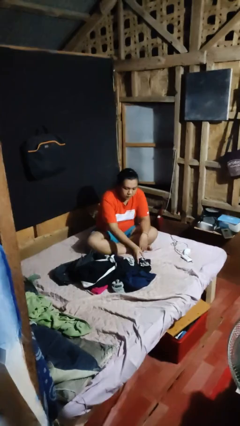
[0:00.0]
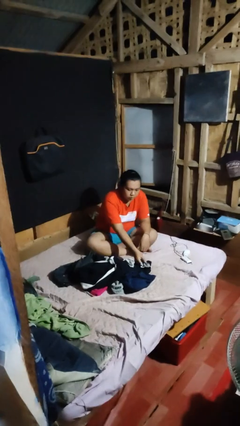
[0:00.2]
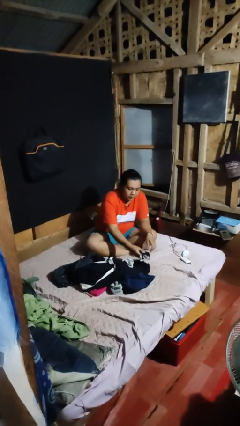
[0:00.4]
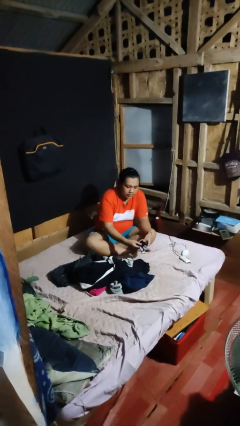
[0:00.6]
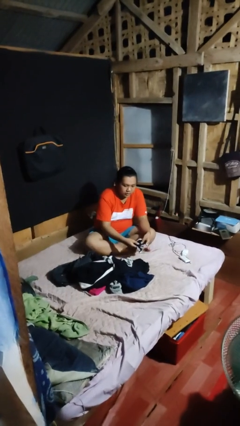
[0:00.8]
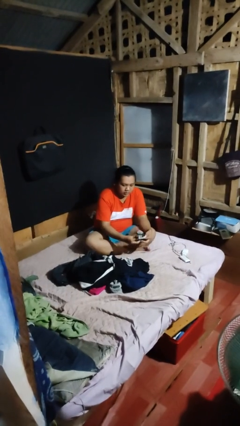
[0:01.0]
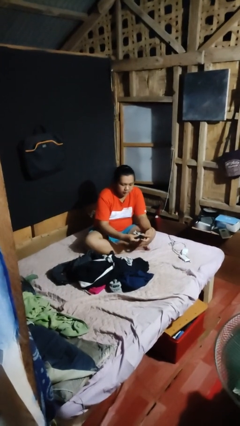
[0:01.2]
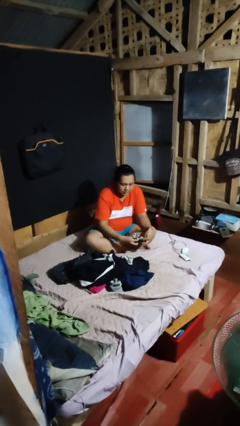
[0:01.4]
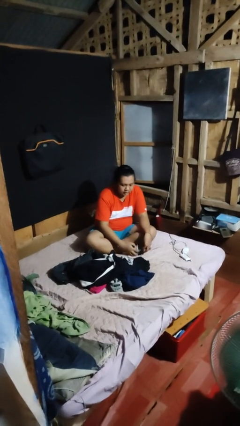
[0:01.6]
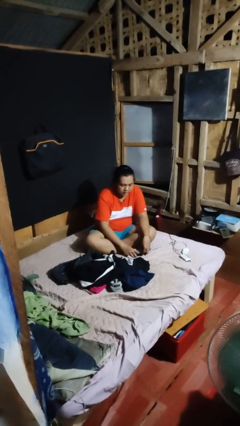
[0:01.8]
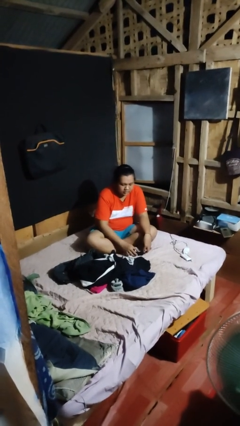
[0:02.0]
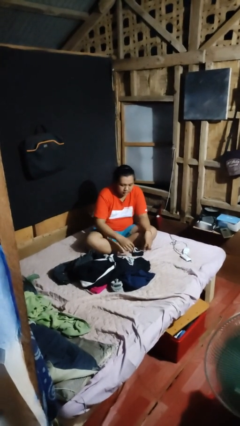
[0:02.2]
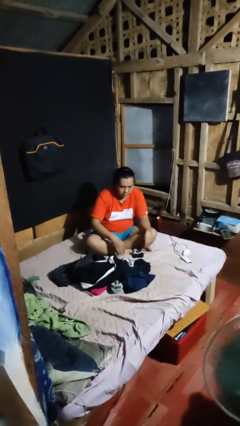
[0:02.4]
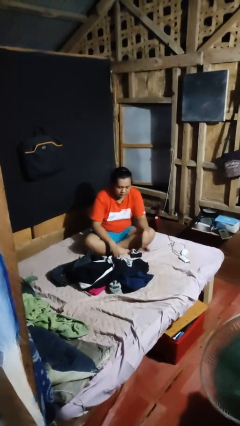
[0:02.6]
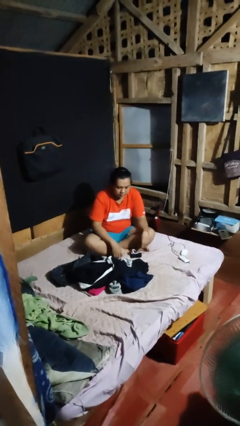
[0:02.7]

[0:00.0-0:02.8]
person folds socks

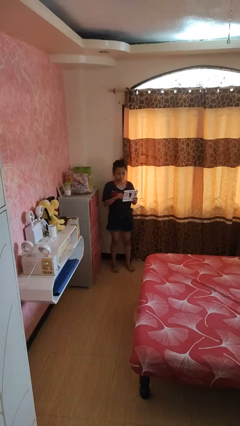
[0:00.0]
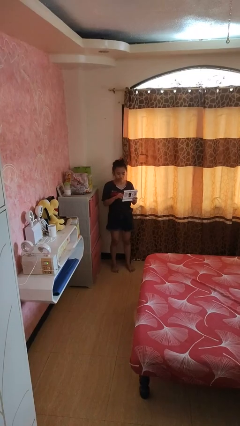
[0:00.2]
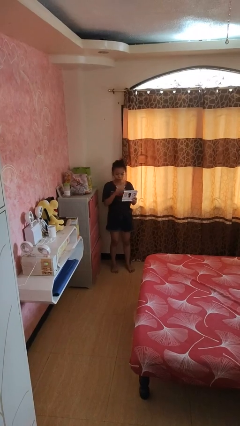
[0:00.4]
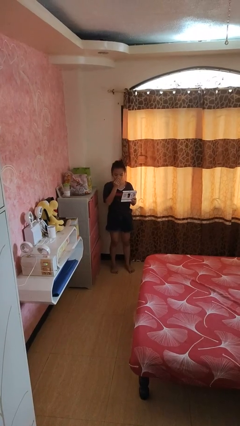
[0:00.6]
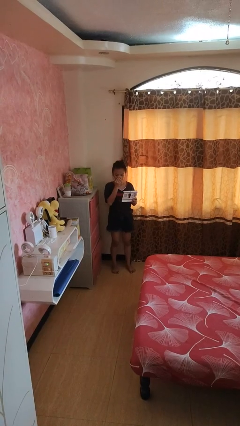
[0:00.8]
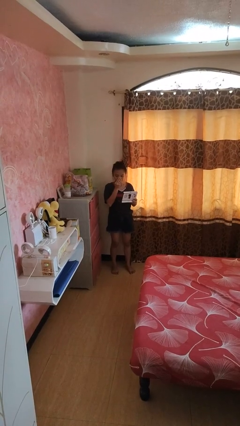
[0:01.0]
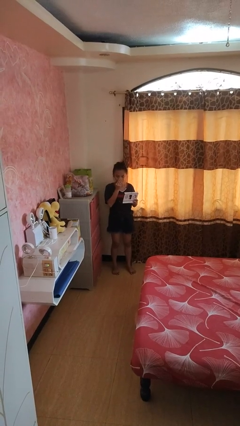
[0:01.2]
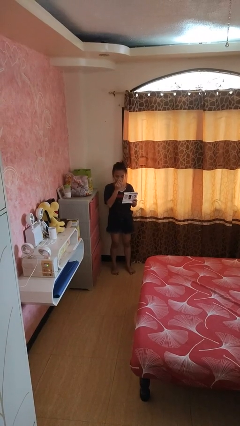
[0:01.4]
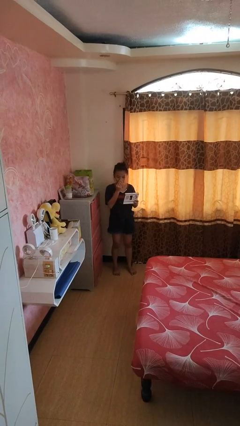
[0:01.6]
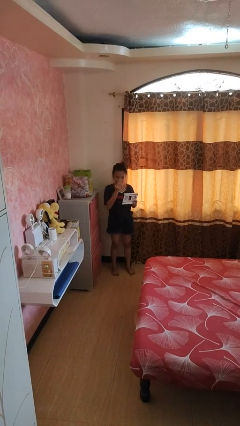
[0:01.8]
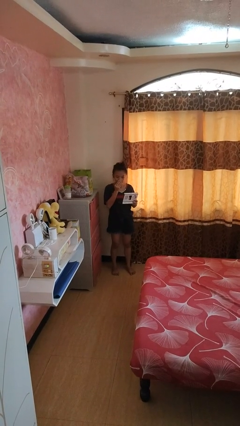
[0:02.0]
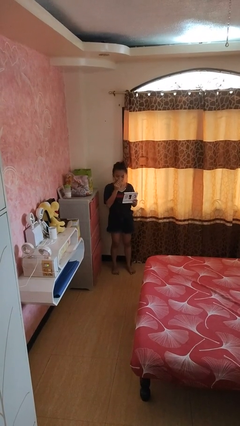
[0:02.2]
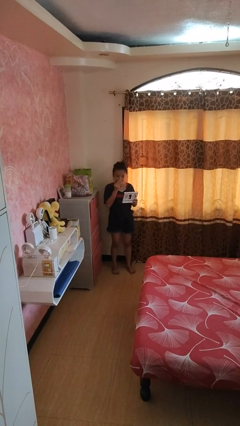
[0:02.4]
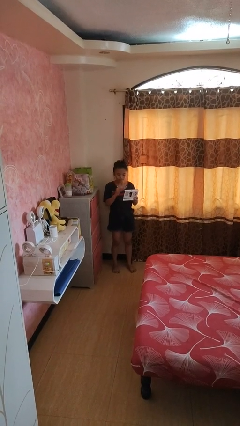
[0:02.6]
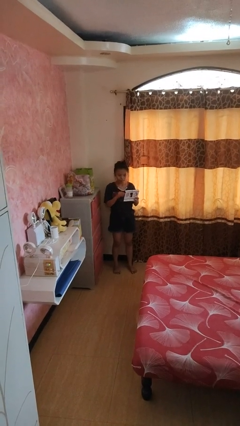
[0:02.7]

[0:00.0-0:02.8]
person applies foundation makeup

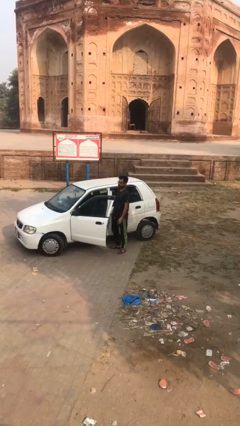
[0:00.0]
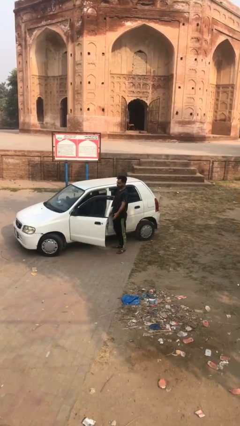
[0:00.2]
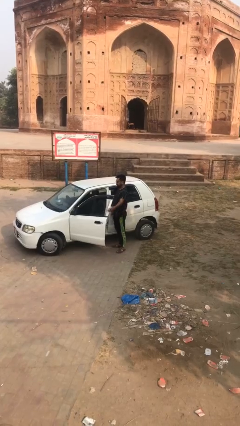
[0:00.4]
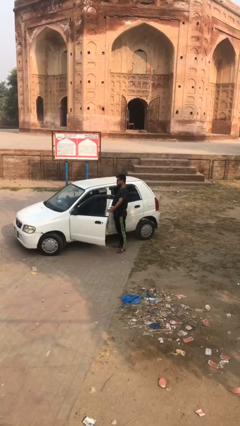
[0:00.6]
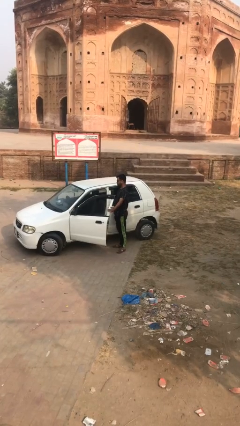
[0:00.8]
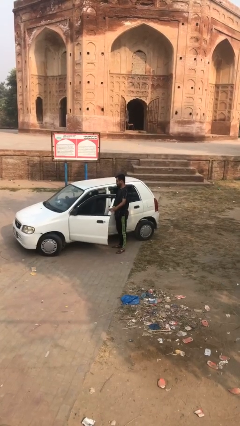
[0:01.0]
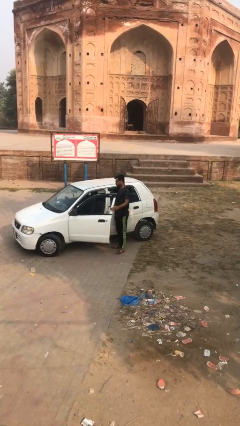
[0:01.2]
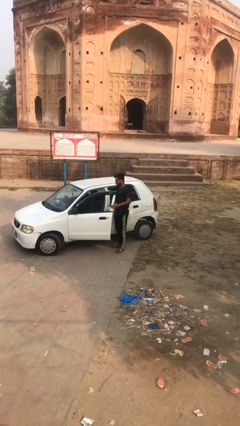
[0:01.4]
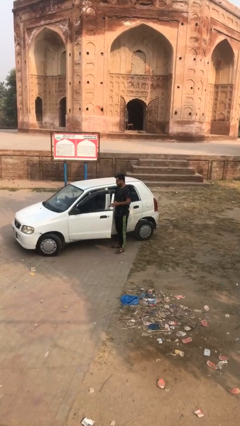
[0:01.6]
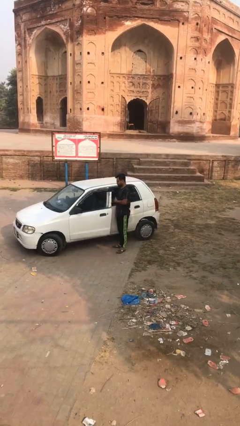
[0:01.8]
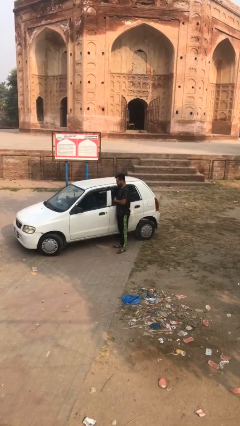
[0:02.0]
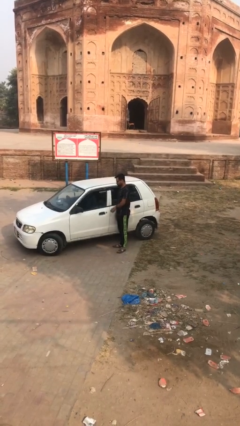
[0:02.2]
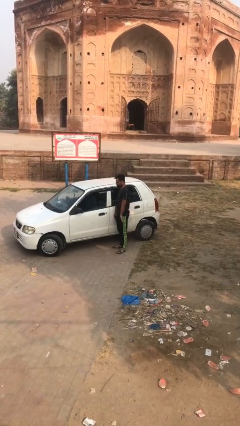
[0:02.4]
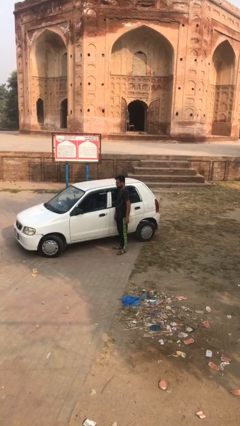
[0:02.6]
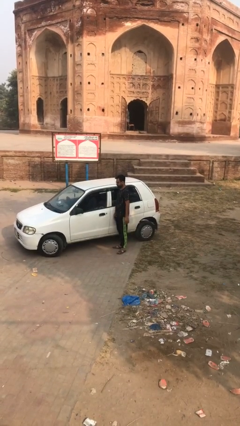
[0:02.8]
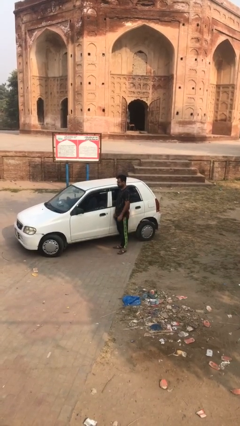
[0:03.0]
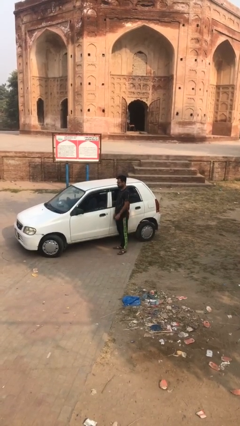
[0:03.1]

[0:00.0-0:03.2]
person closes car door

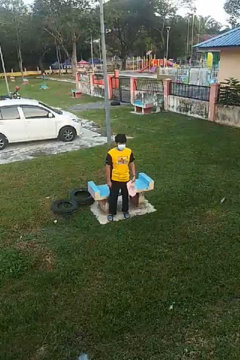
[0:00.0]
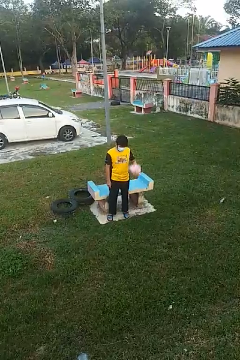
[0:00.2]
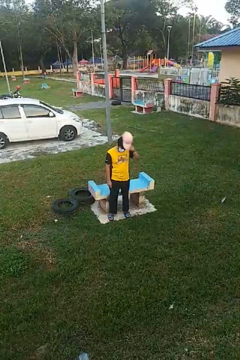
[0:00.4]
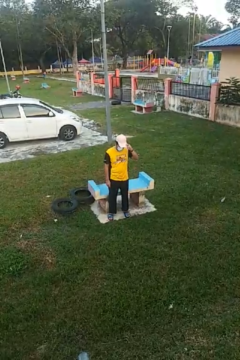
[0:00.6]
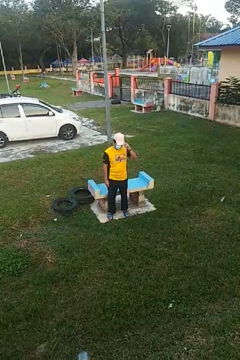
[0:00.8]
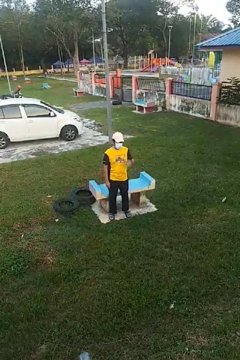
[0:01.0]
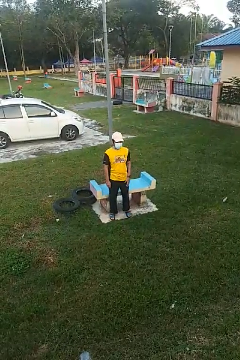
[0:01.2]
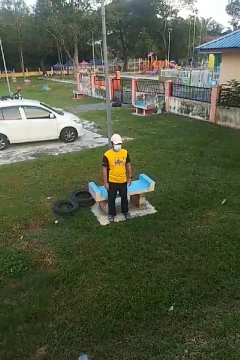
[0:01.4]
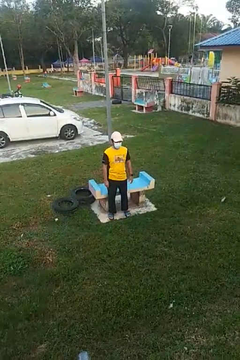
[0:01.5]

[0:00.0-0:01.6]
person puts on hat

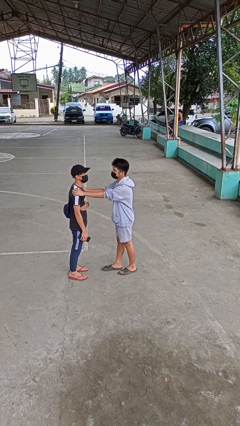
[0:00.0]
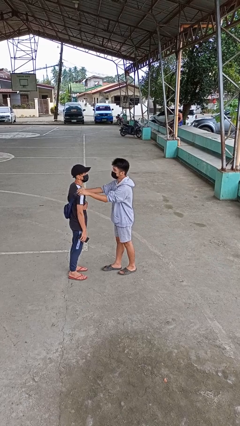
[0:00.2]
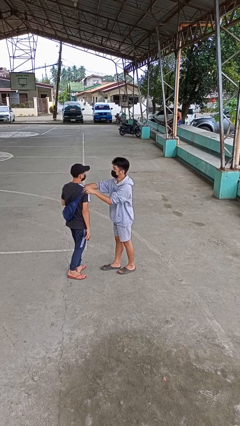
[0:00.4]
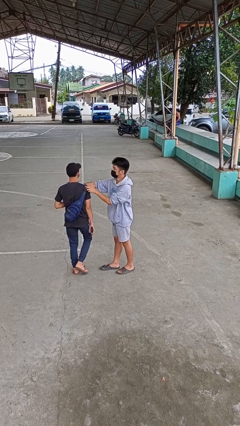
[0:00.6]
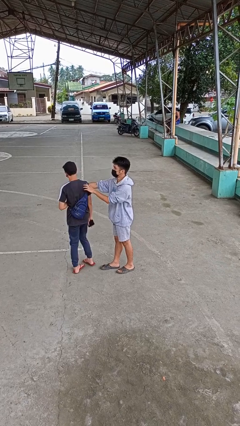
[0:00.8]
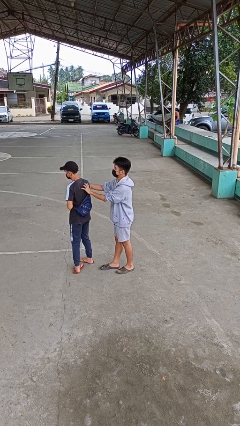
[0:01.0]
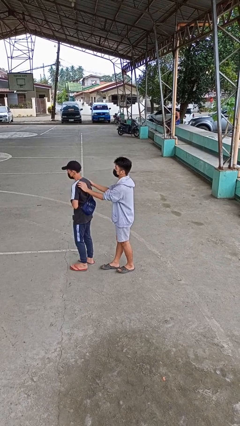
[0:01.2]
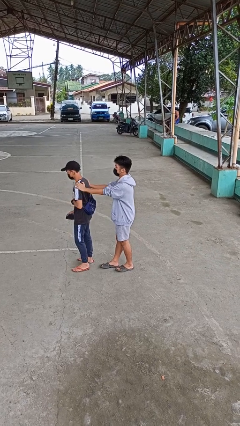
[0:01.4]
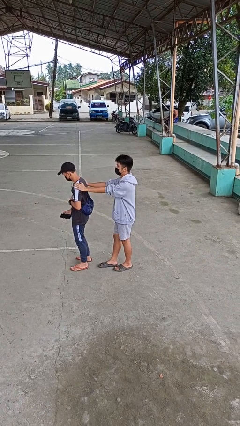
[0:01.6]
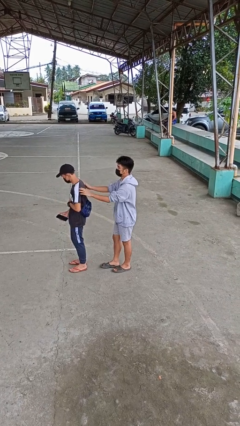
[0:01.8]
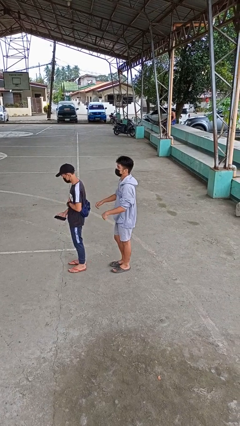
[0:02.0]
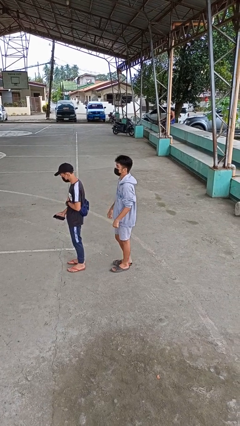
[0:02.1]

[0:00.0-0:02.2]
person spins person around

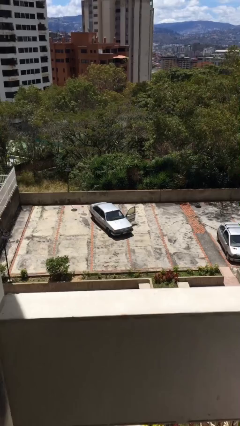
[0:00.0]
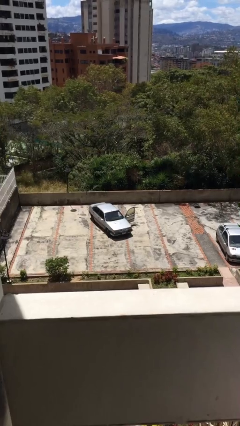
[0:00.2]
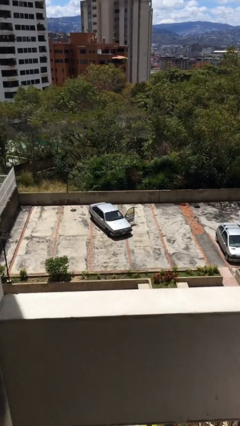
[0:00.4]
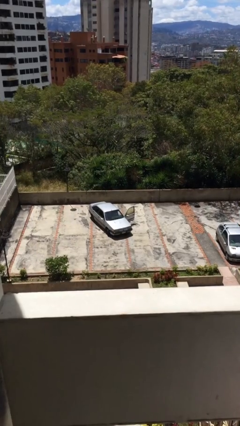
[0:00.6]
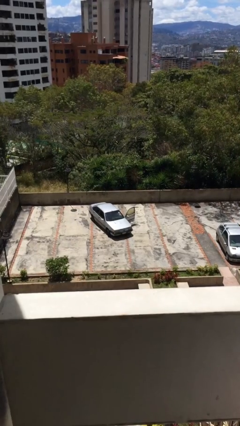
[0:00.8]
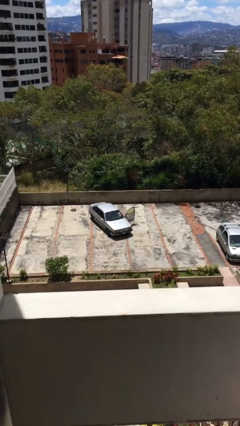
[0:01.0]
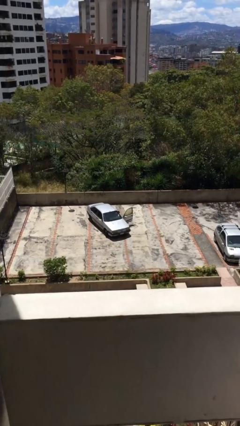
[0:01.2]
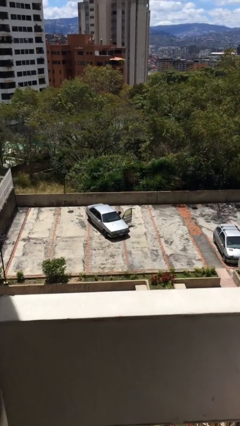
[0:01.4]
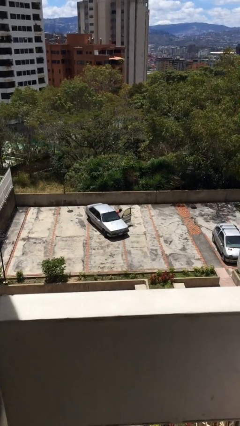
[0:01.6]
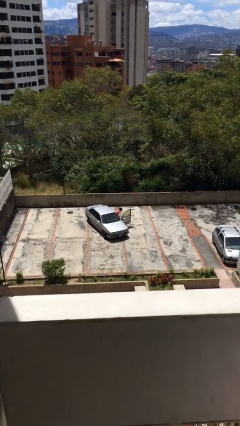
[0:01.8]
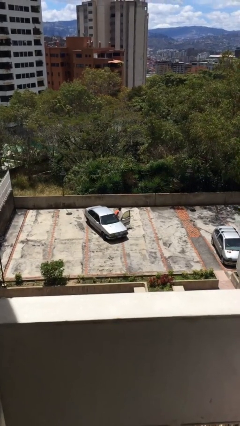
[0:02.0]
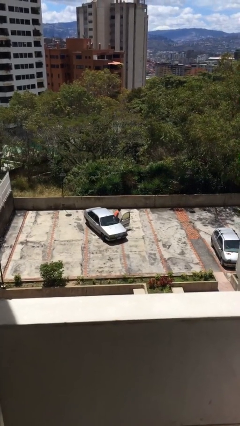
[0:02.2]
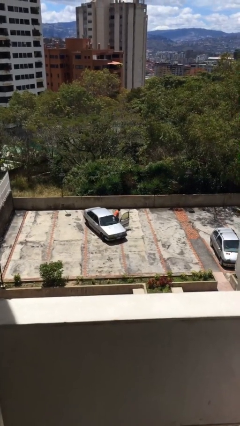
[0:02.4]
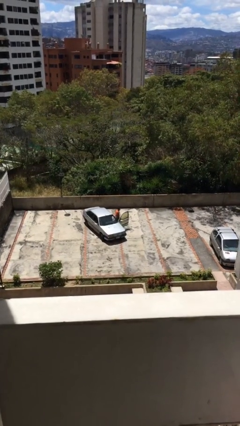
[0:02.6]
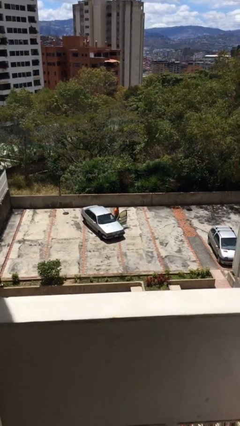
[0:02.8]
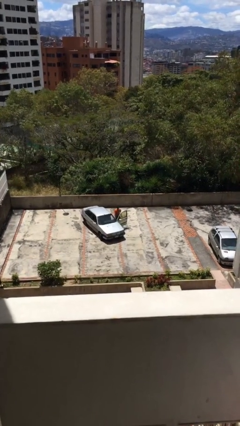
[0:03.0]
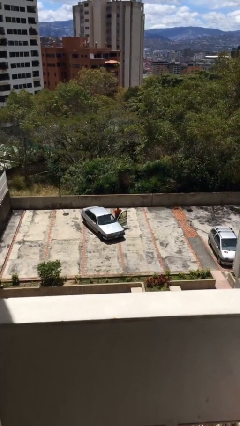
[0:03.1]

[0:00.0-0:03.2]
person exits car

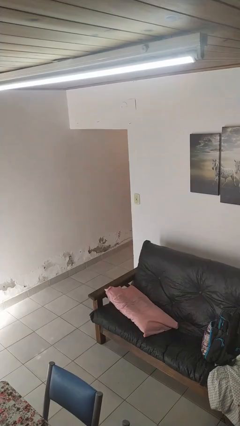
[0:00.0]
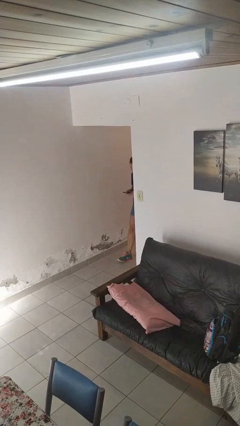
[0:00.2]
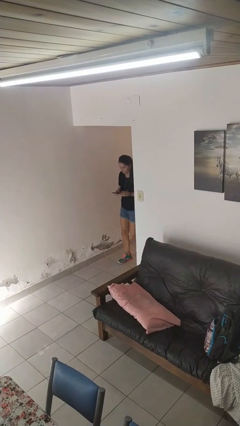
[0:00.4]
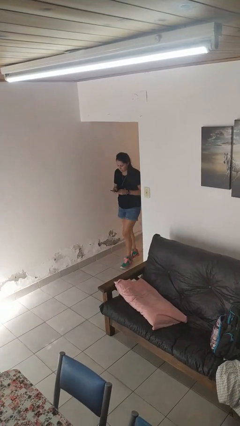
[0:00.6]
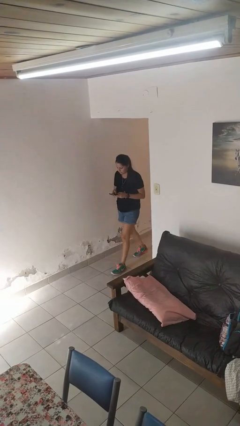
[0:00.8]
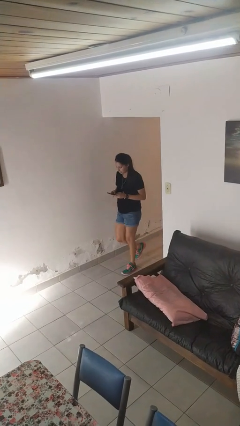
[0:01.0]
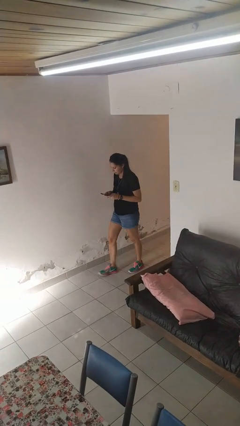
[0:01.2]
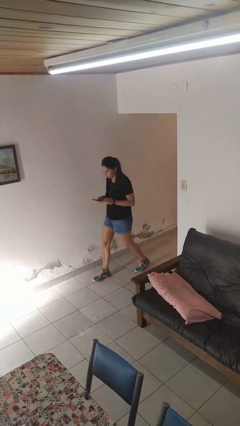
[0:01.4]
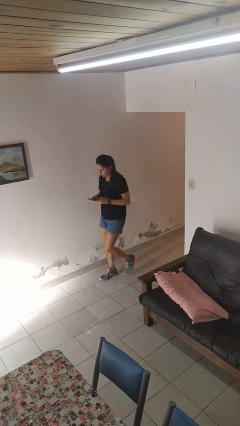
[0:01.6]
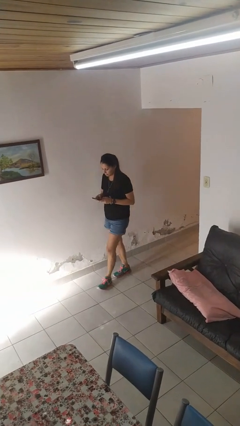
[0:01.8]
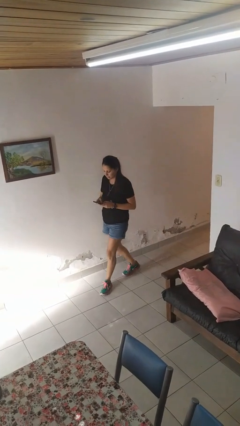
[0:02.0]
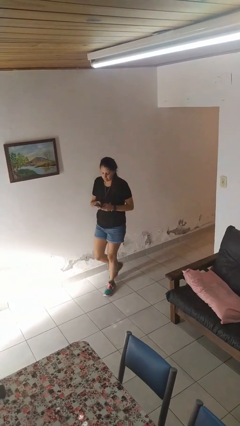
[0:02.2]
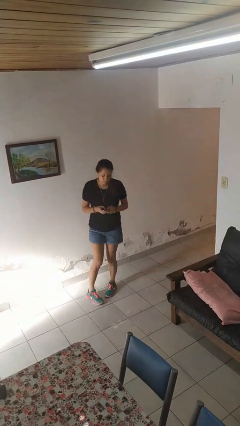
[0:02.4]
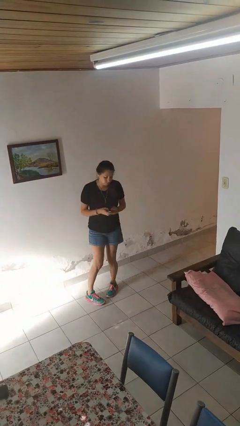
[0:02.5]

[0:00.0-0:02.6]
person enters scene through structure
